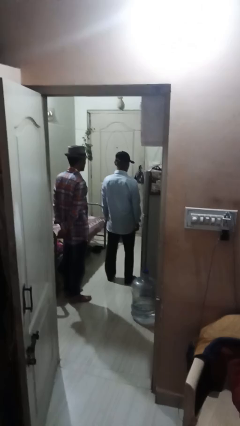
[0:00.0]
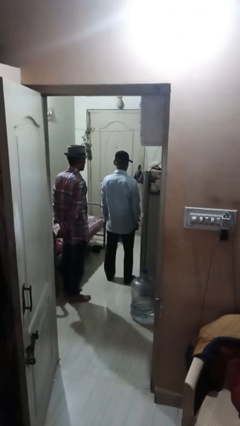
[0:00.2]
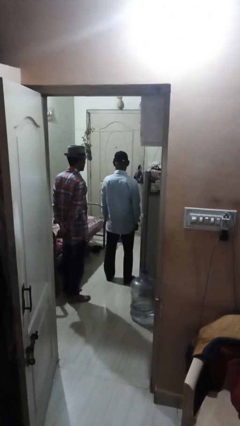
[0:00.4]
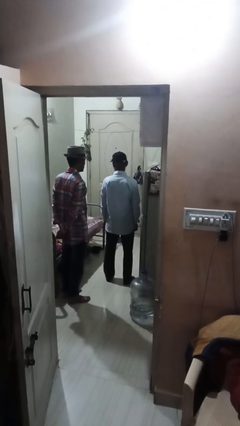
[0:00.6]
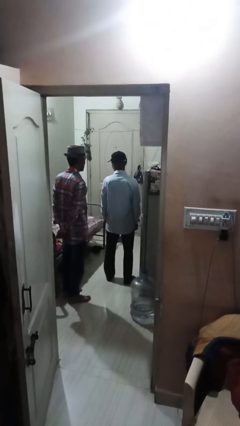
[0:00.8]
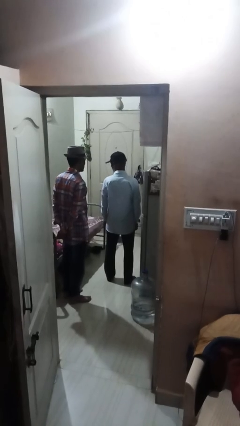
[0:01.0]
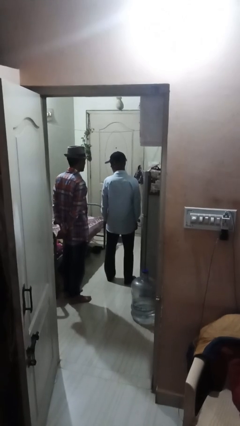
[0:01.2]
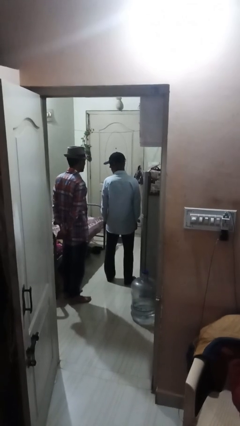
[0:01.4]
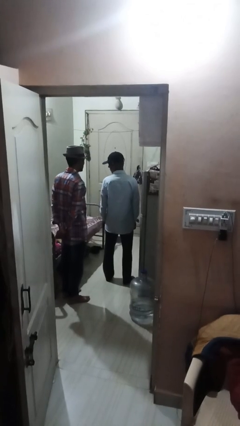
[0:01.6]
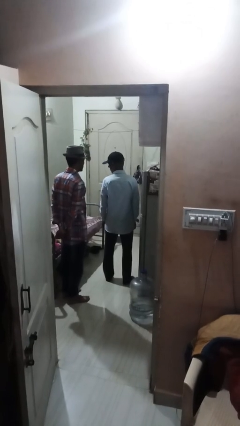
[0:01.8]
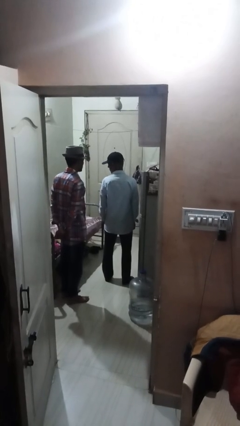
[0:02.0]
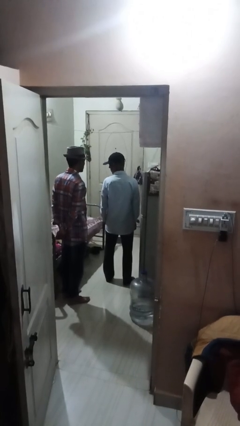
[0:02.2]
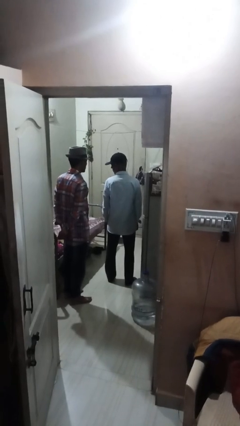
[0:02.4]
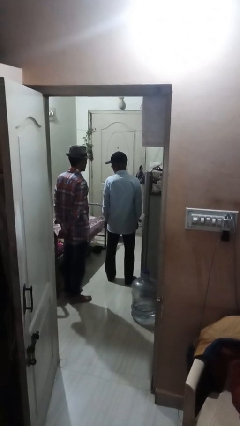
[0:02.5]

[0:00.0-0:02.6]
person looks over shoulder

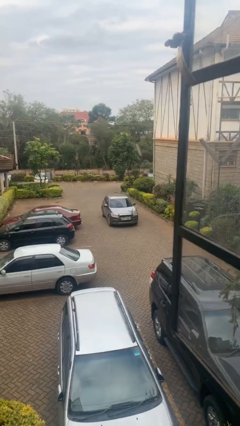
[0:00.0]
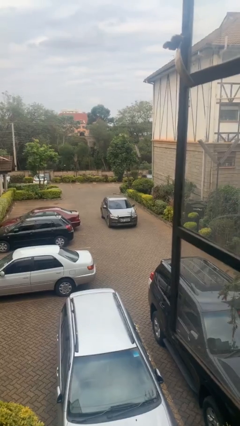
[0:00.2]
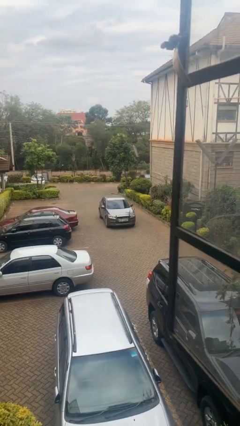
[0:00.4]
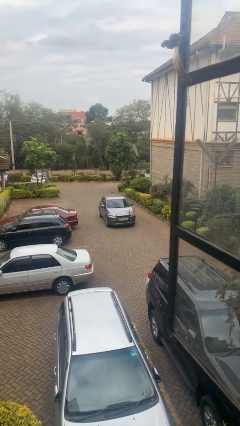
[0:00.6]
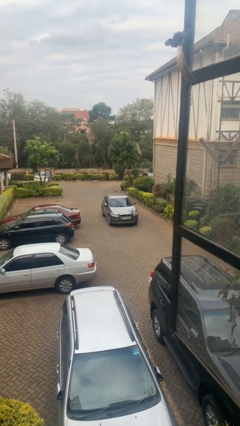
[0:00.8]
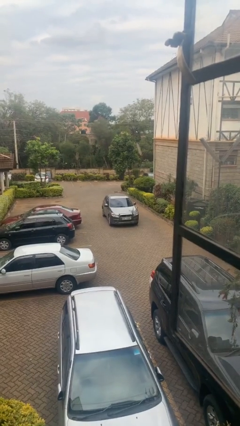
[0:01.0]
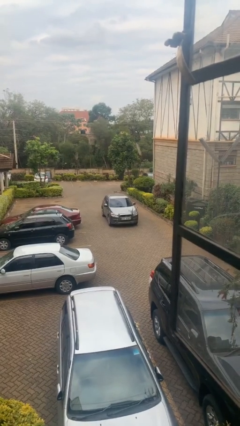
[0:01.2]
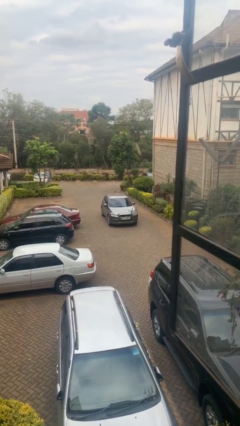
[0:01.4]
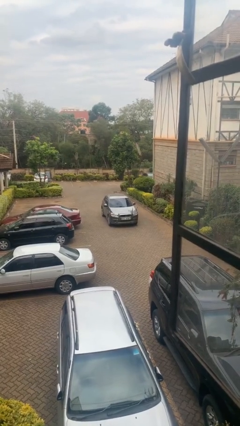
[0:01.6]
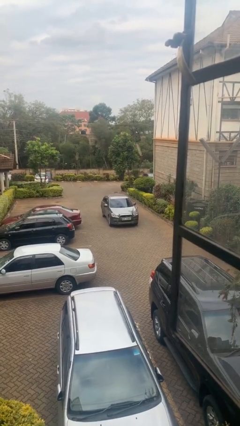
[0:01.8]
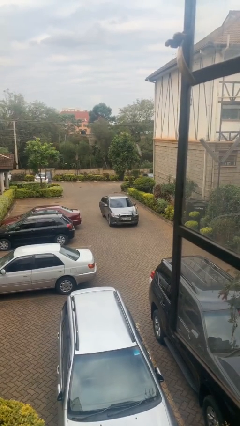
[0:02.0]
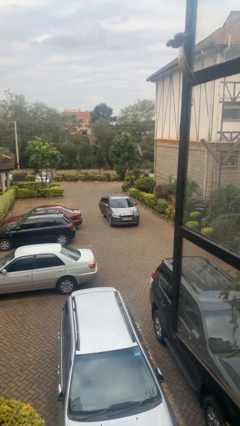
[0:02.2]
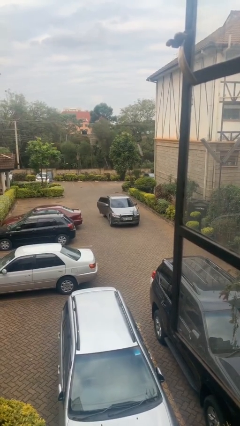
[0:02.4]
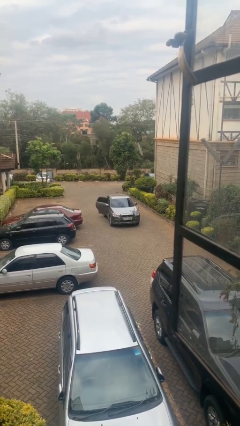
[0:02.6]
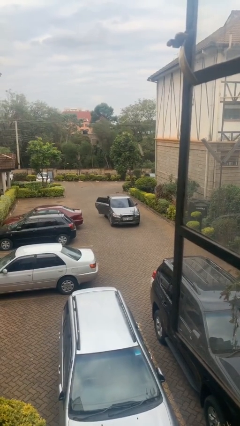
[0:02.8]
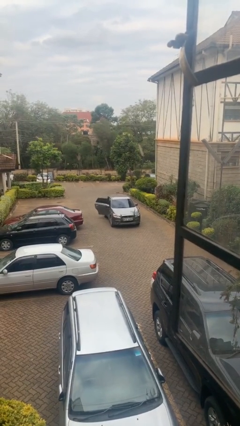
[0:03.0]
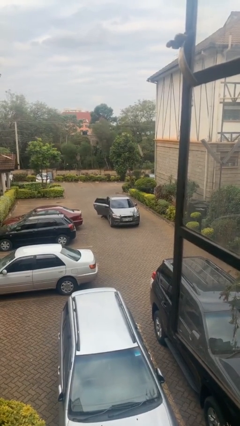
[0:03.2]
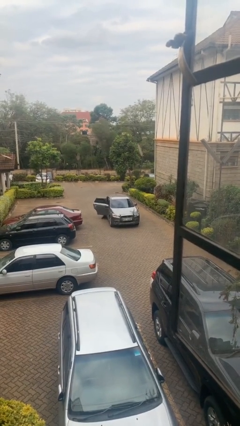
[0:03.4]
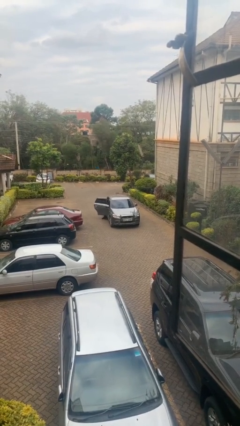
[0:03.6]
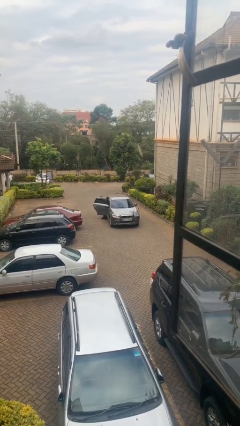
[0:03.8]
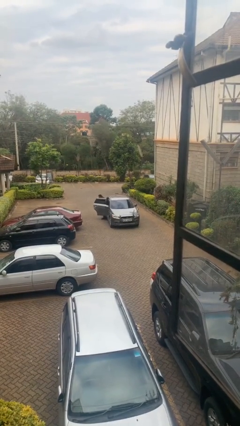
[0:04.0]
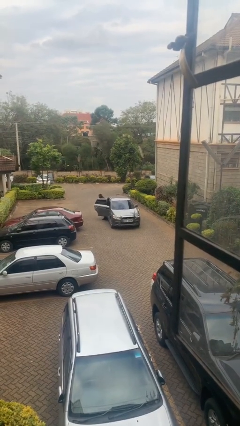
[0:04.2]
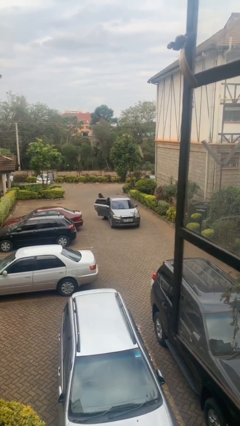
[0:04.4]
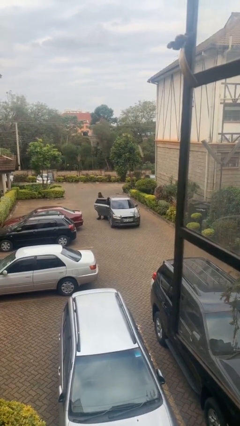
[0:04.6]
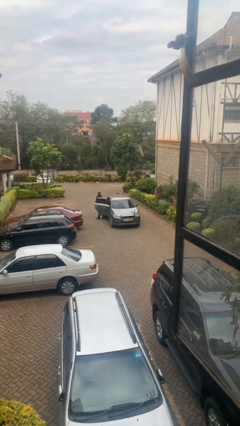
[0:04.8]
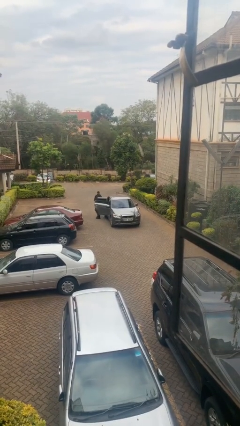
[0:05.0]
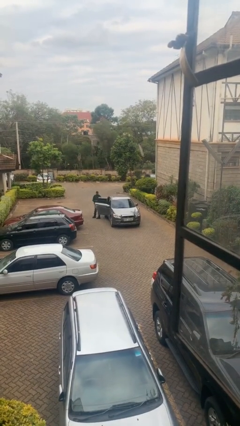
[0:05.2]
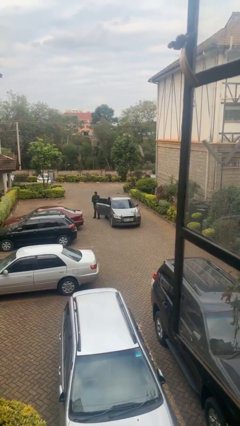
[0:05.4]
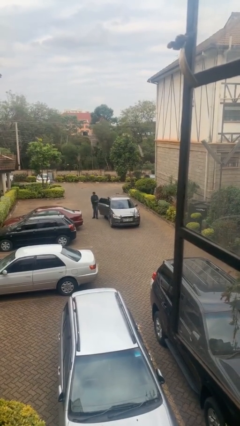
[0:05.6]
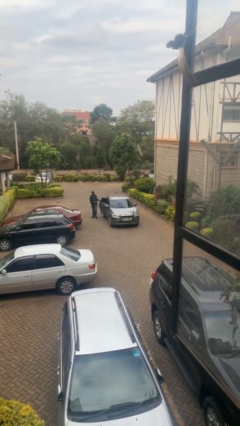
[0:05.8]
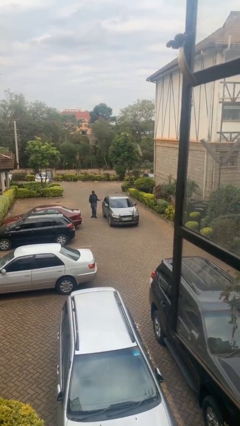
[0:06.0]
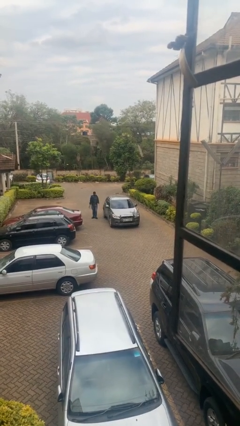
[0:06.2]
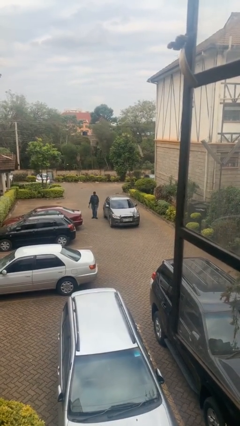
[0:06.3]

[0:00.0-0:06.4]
car drops off person

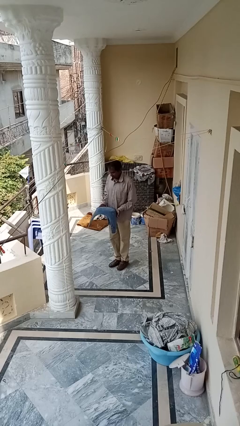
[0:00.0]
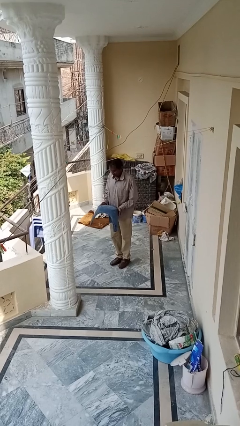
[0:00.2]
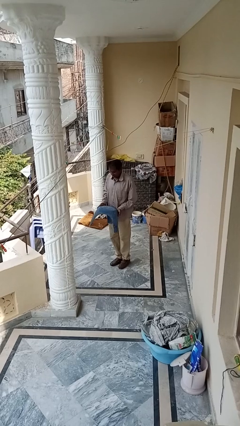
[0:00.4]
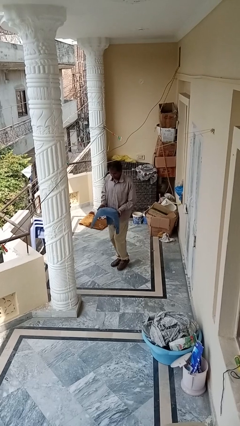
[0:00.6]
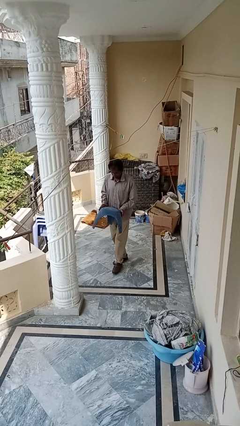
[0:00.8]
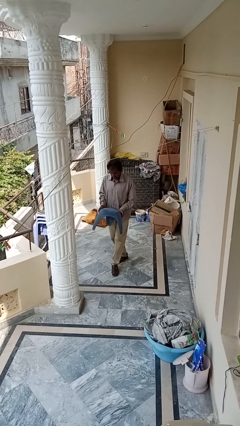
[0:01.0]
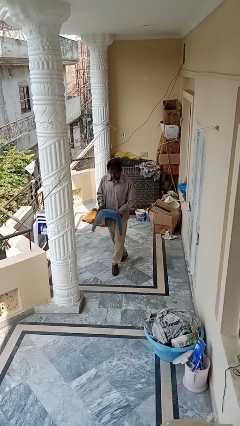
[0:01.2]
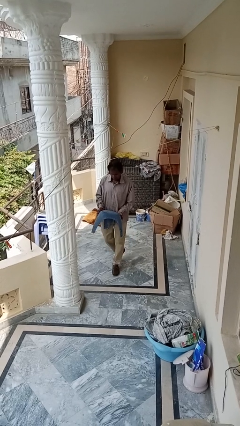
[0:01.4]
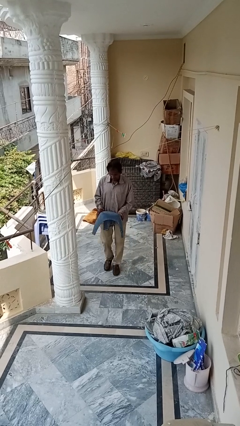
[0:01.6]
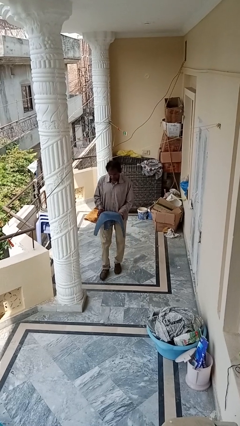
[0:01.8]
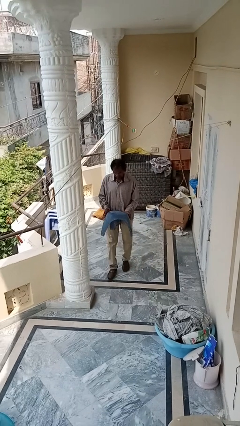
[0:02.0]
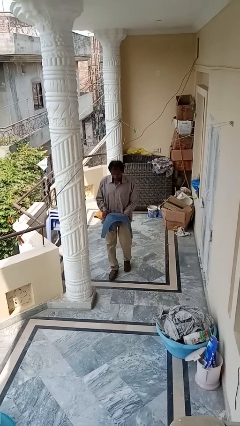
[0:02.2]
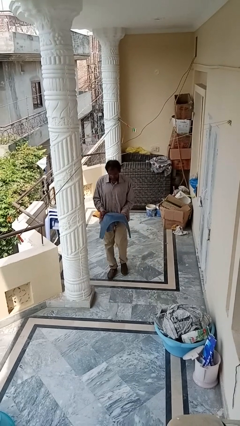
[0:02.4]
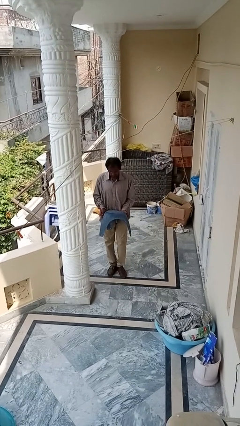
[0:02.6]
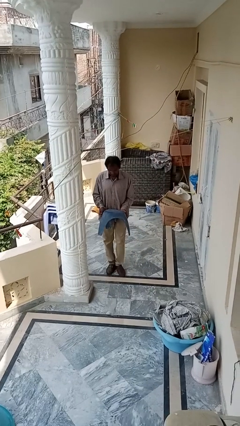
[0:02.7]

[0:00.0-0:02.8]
person carries furniture

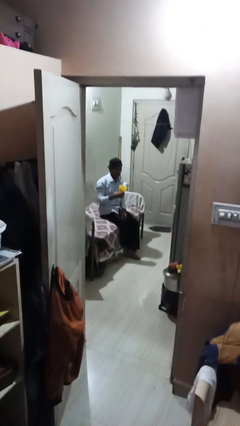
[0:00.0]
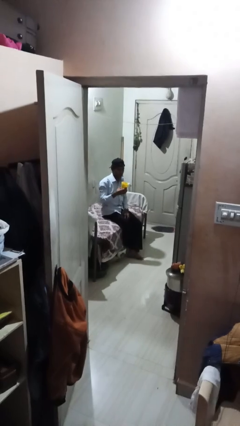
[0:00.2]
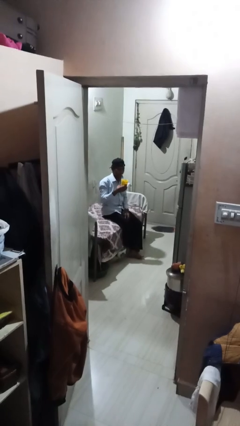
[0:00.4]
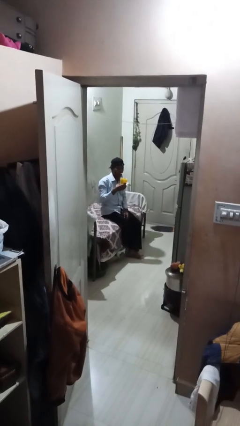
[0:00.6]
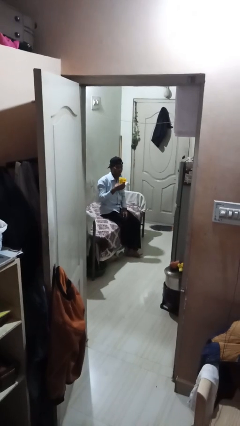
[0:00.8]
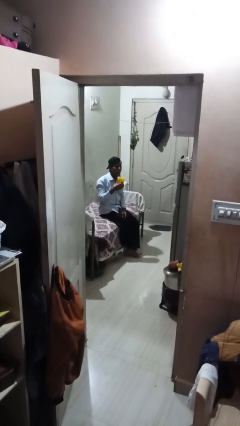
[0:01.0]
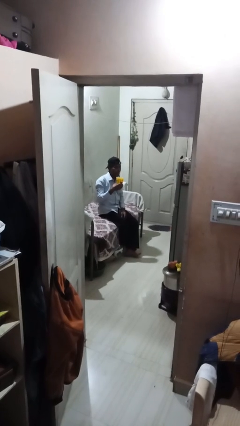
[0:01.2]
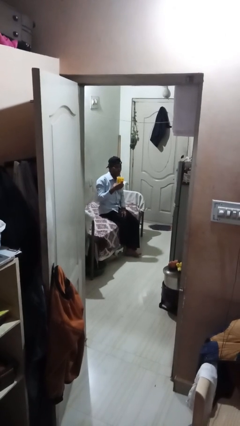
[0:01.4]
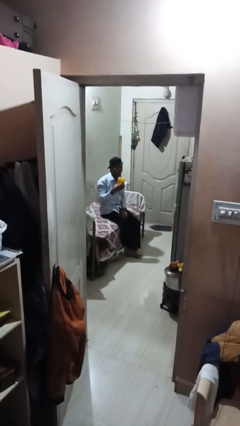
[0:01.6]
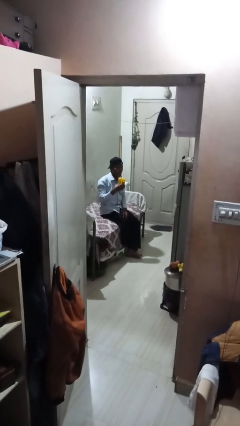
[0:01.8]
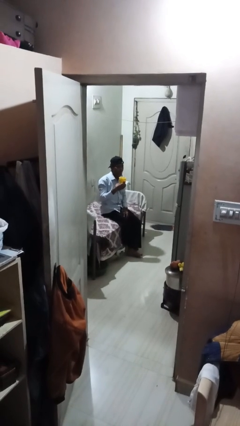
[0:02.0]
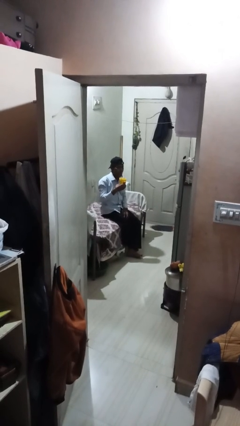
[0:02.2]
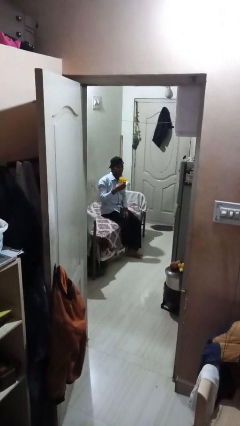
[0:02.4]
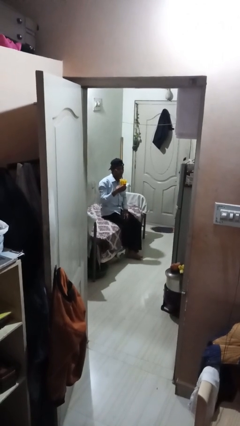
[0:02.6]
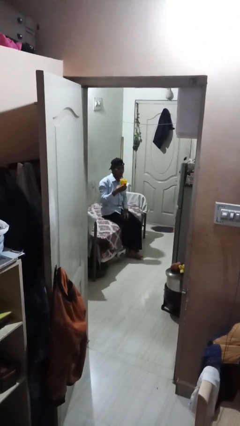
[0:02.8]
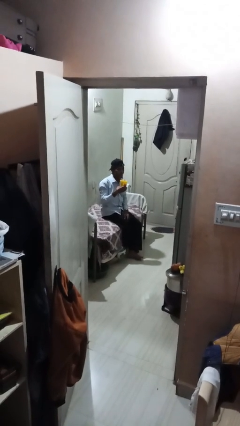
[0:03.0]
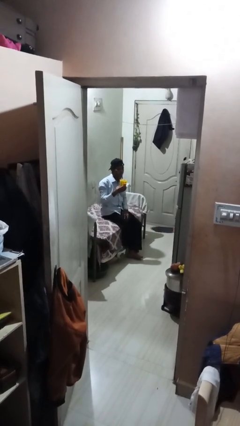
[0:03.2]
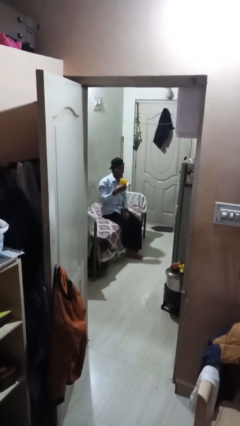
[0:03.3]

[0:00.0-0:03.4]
person drinks from straw

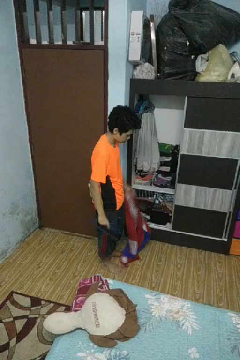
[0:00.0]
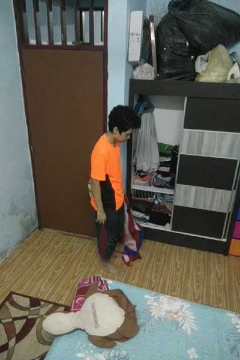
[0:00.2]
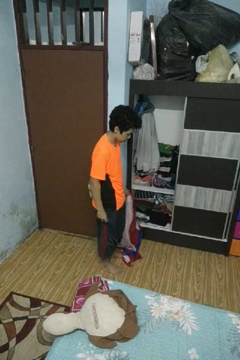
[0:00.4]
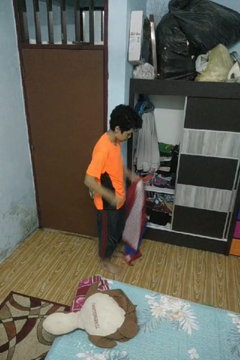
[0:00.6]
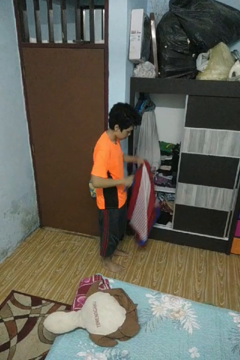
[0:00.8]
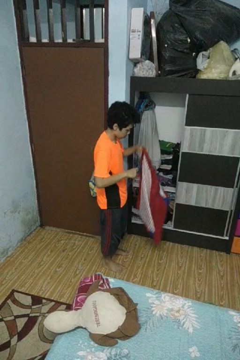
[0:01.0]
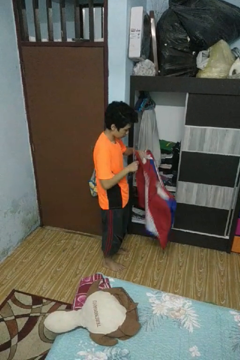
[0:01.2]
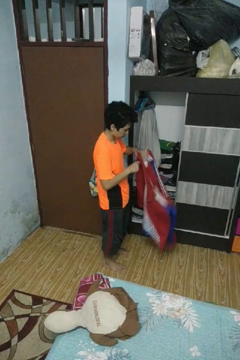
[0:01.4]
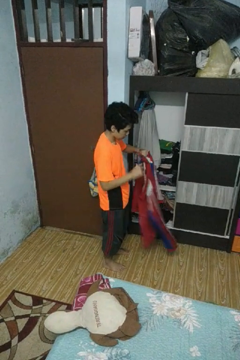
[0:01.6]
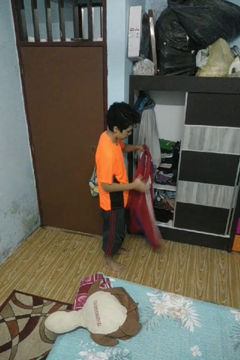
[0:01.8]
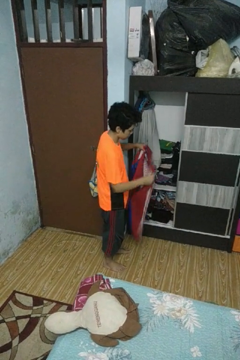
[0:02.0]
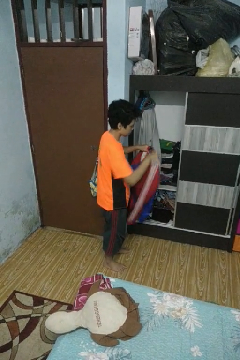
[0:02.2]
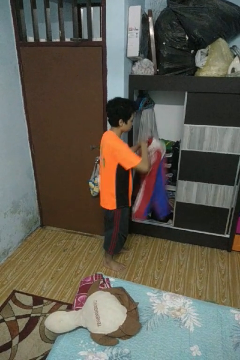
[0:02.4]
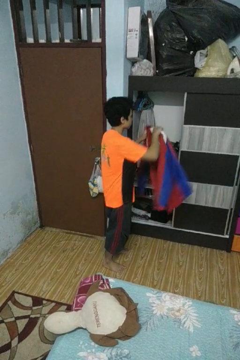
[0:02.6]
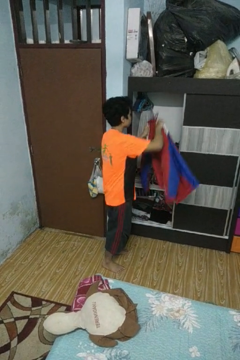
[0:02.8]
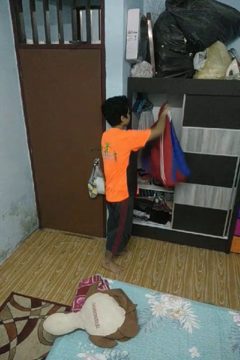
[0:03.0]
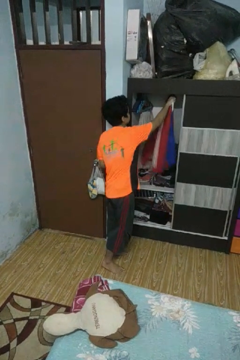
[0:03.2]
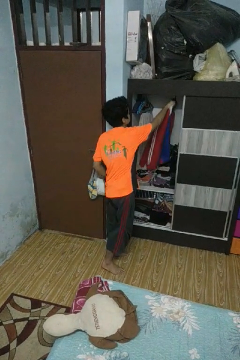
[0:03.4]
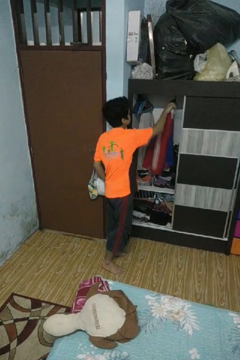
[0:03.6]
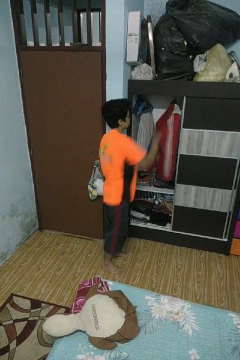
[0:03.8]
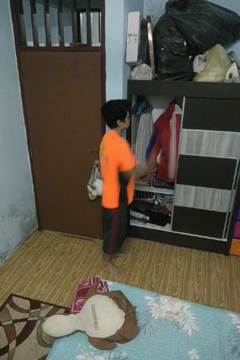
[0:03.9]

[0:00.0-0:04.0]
person puts clothes into closet
